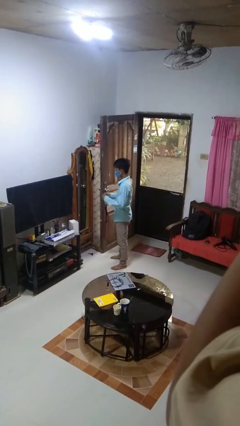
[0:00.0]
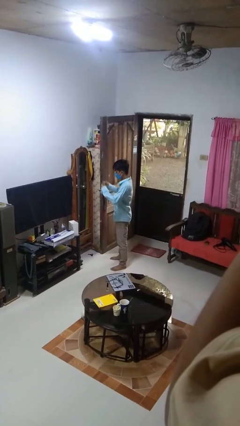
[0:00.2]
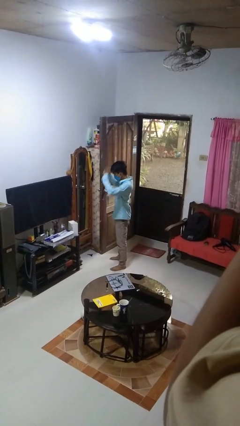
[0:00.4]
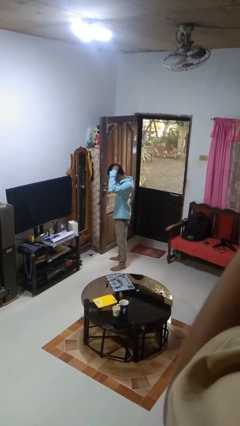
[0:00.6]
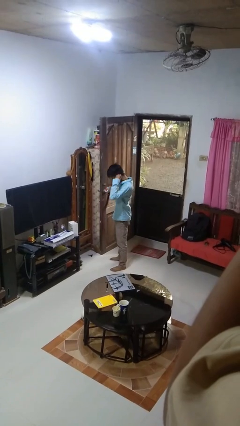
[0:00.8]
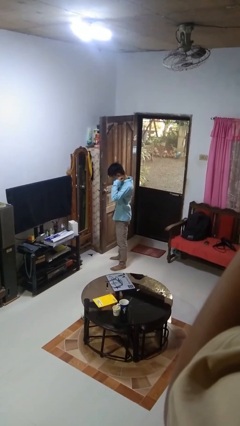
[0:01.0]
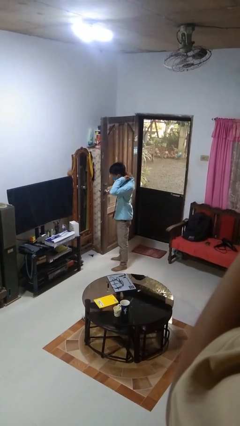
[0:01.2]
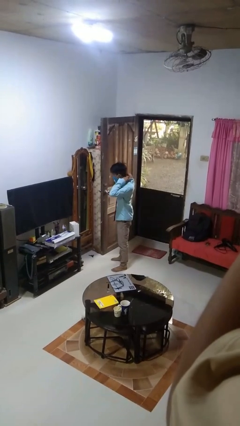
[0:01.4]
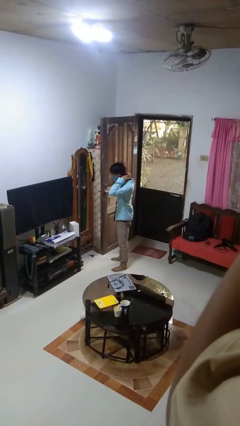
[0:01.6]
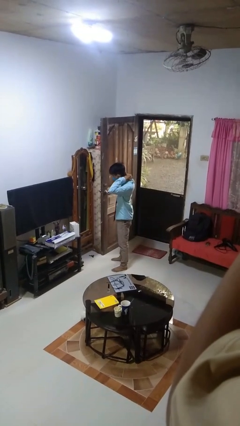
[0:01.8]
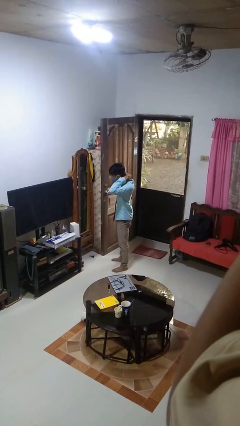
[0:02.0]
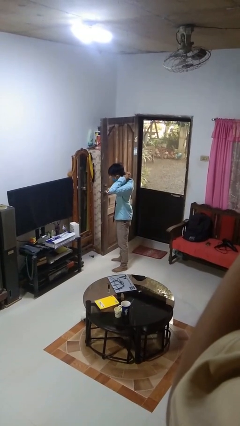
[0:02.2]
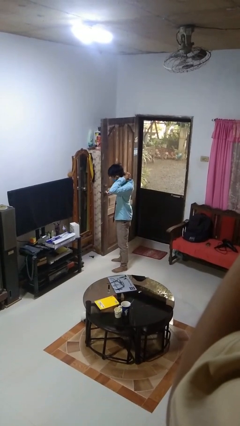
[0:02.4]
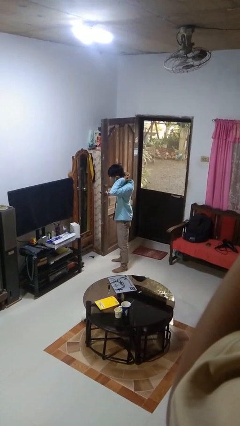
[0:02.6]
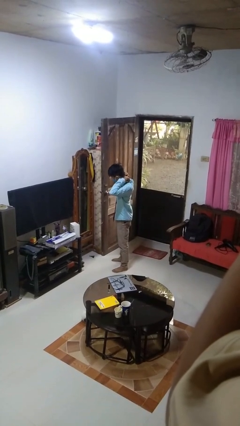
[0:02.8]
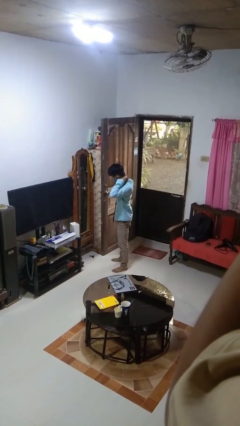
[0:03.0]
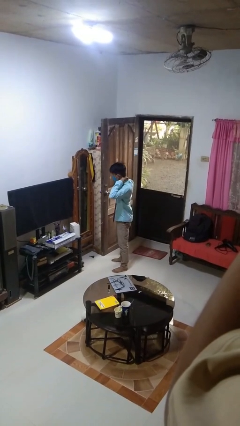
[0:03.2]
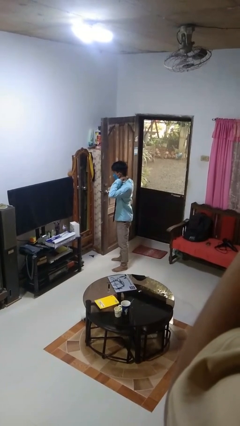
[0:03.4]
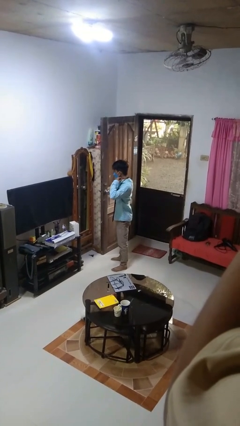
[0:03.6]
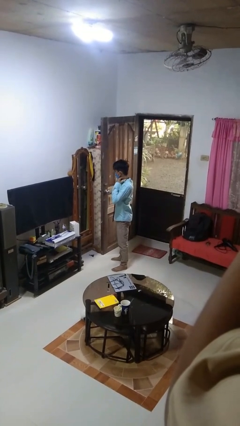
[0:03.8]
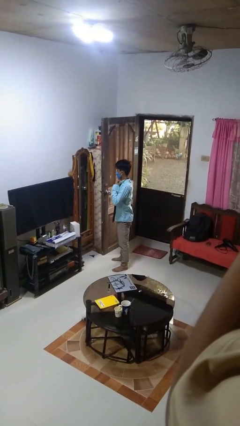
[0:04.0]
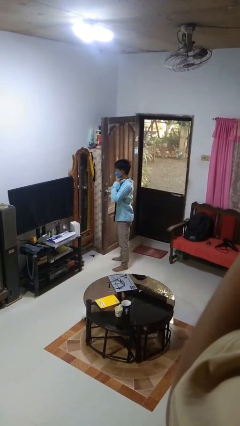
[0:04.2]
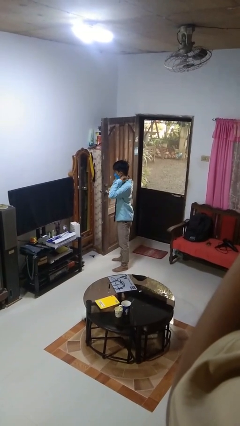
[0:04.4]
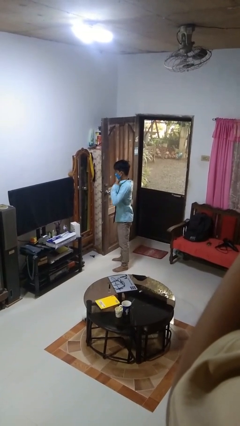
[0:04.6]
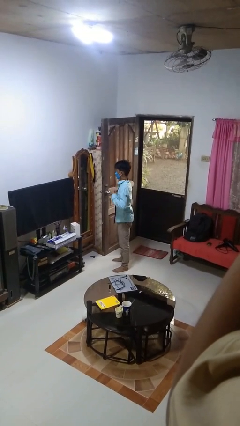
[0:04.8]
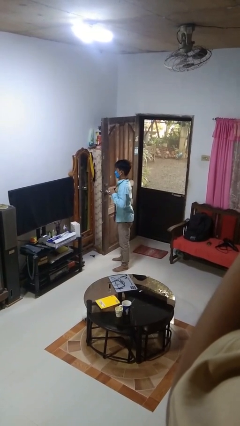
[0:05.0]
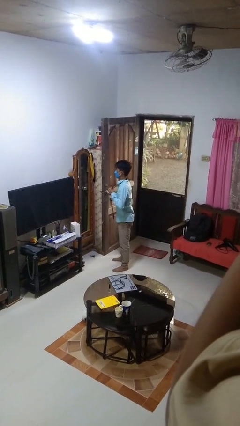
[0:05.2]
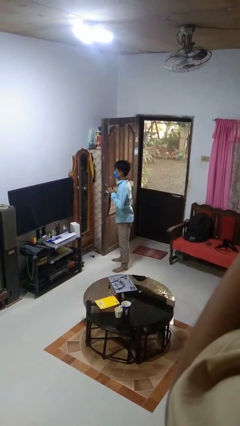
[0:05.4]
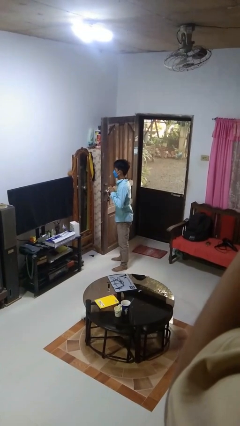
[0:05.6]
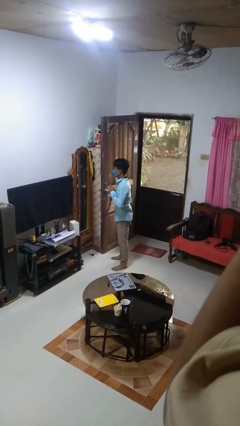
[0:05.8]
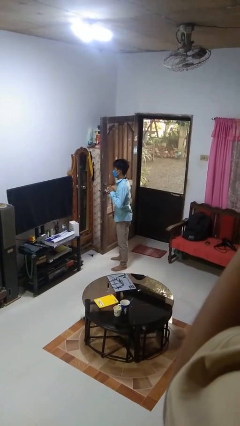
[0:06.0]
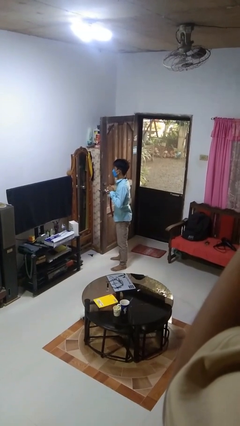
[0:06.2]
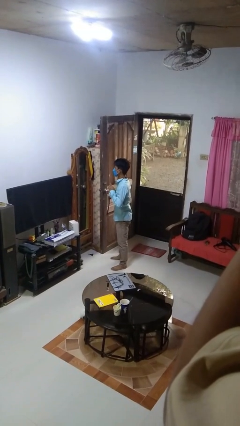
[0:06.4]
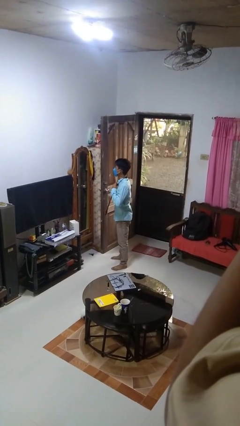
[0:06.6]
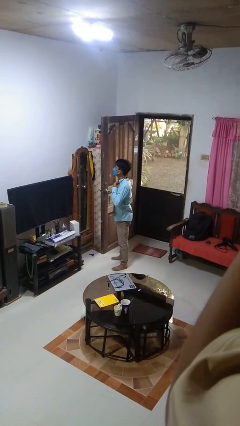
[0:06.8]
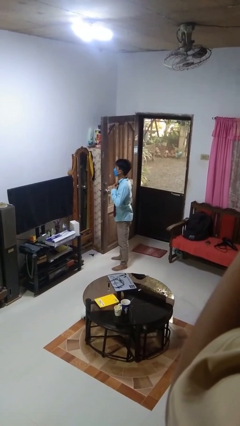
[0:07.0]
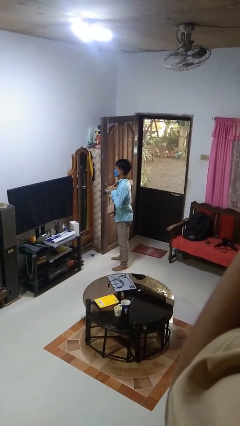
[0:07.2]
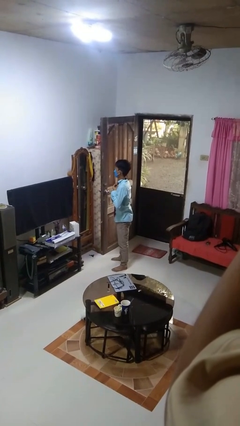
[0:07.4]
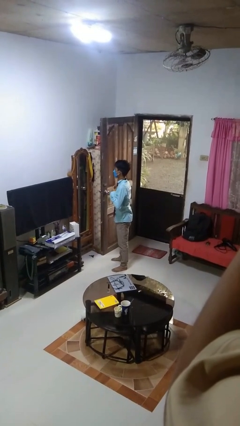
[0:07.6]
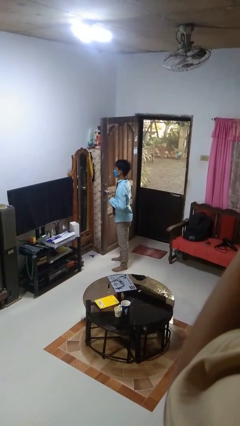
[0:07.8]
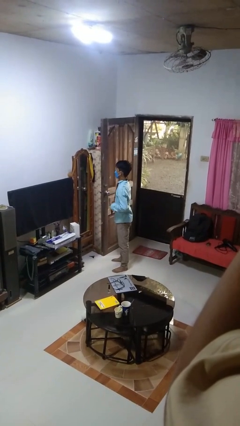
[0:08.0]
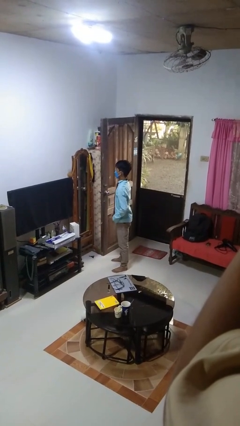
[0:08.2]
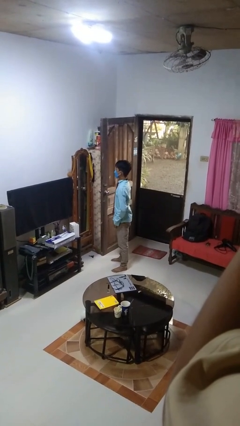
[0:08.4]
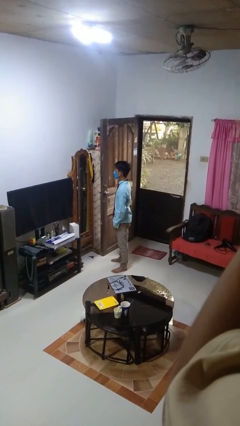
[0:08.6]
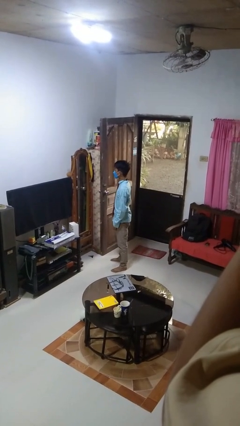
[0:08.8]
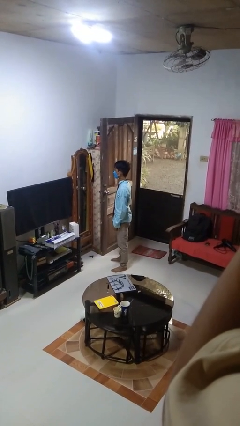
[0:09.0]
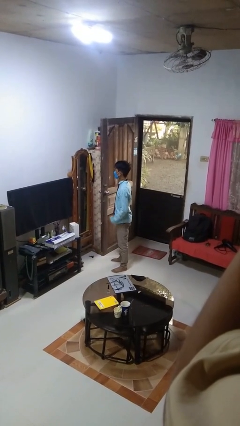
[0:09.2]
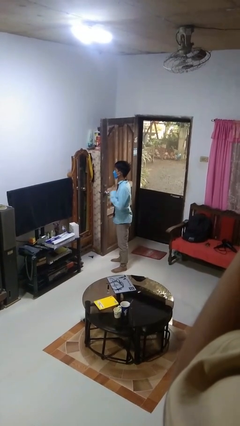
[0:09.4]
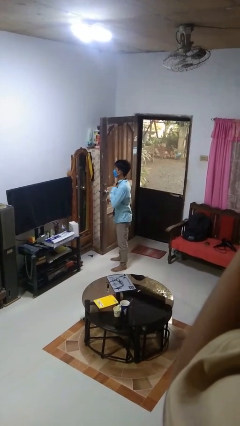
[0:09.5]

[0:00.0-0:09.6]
person puts on necktie

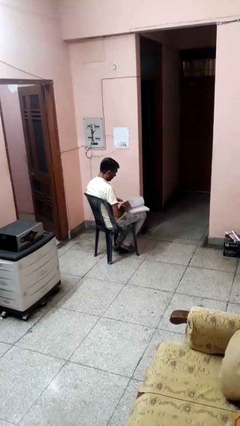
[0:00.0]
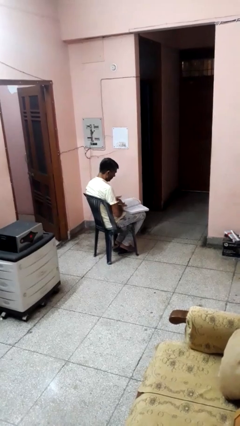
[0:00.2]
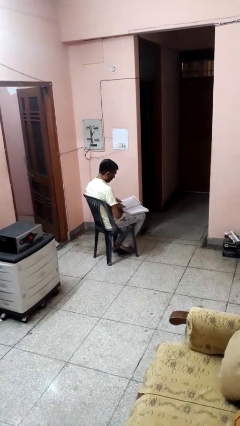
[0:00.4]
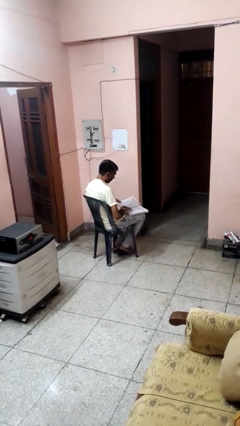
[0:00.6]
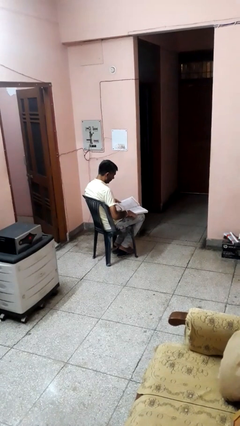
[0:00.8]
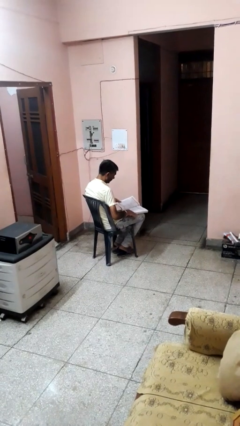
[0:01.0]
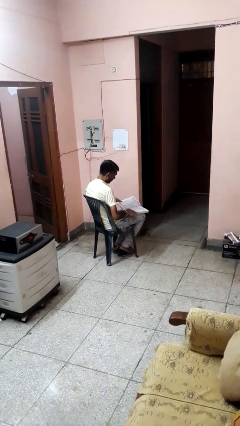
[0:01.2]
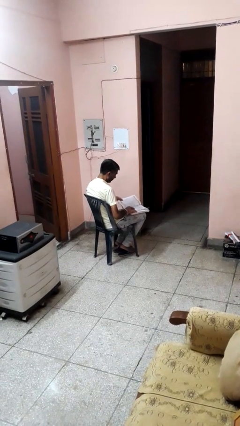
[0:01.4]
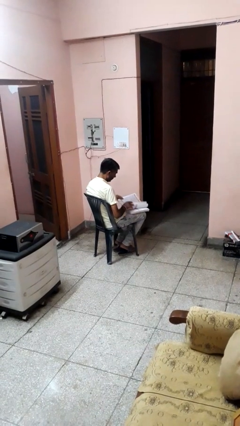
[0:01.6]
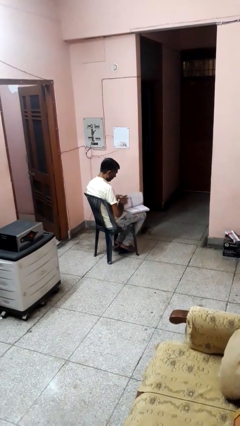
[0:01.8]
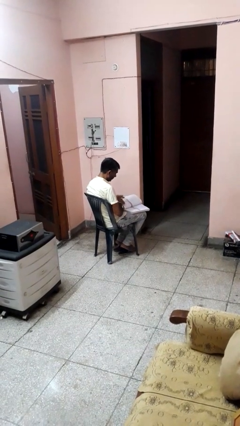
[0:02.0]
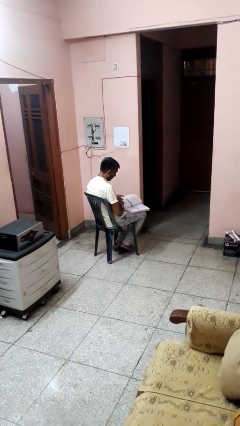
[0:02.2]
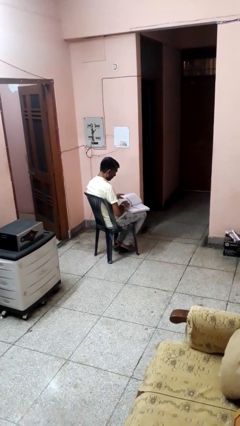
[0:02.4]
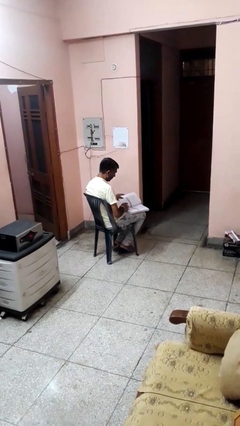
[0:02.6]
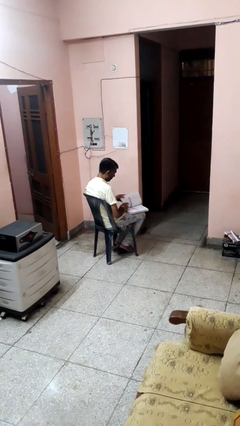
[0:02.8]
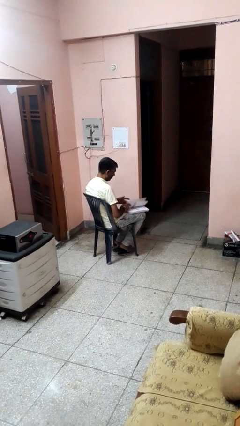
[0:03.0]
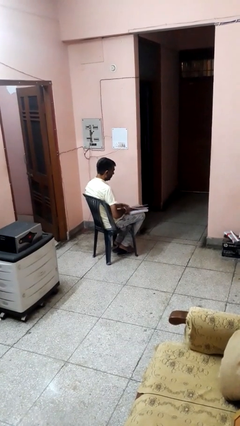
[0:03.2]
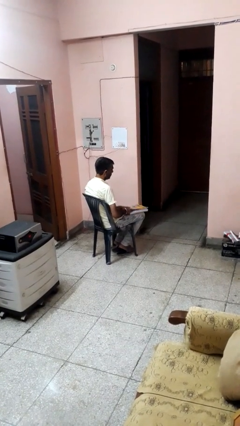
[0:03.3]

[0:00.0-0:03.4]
person reads book

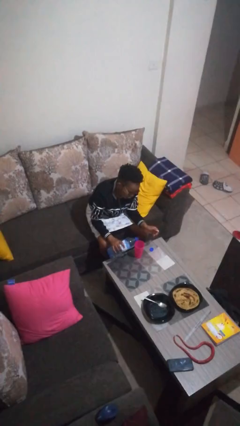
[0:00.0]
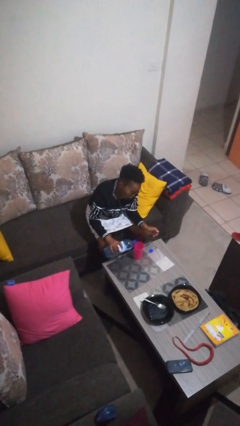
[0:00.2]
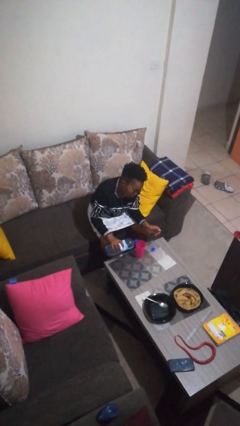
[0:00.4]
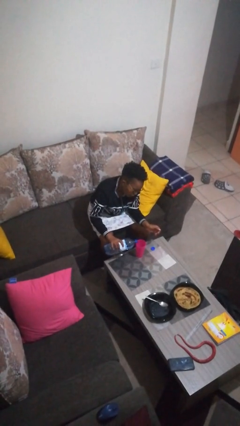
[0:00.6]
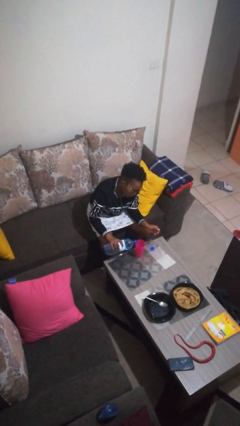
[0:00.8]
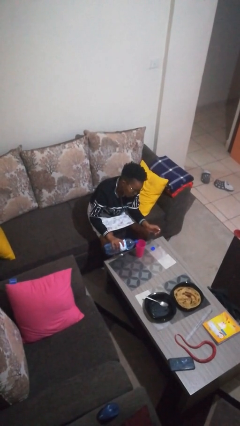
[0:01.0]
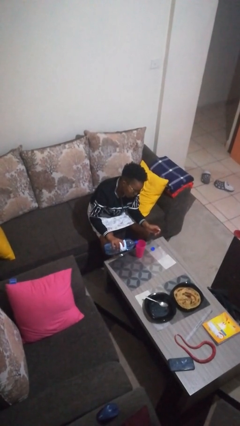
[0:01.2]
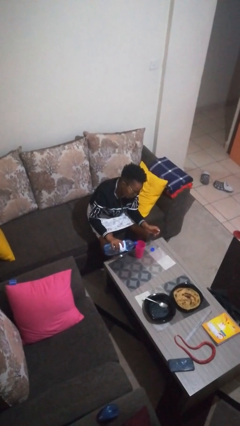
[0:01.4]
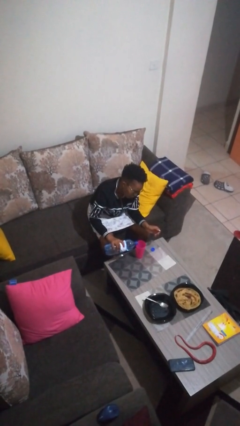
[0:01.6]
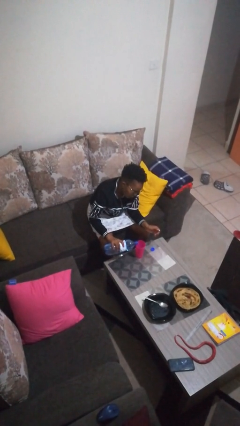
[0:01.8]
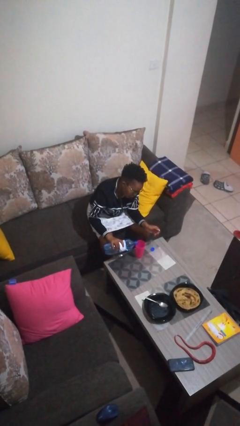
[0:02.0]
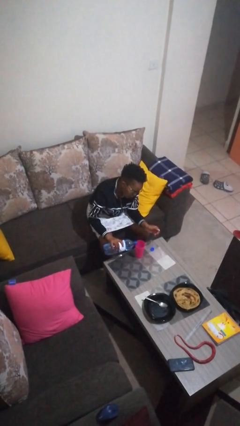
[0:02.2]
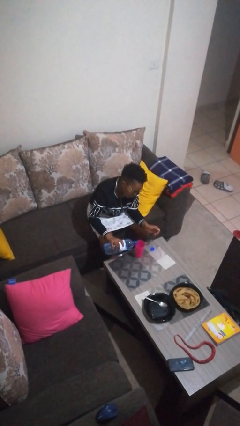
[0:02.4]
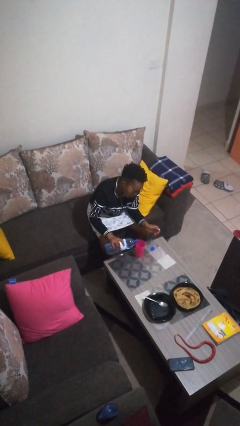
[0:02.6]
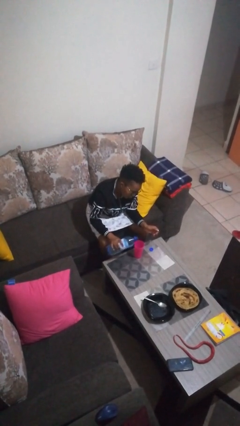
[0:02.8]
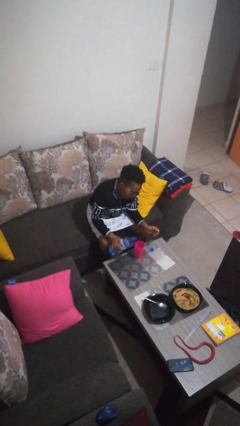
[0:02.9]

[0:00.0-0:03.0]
person pours liquid into cup

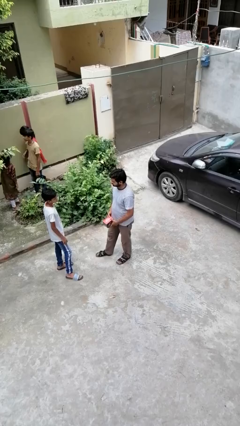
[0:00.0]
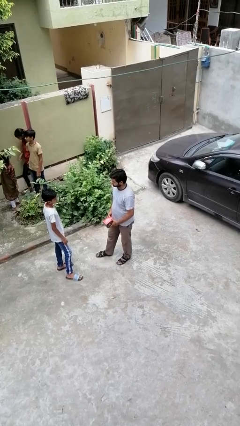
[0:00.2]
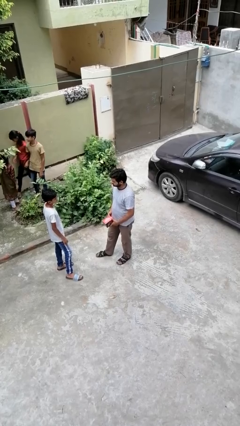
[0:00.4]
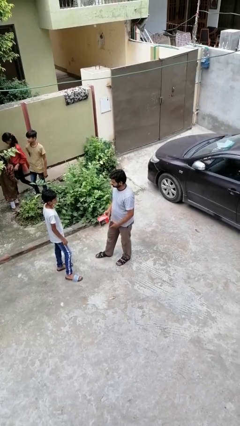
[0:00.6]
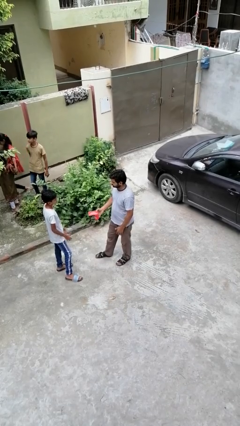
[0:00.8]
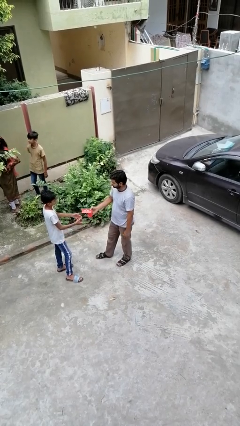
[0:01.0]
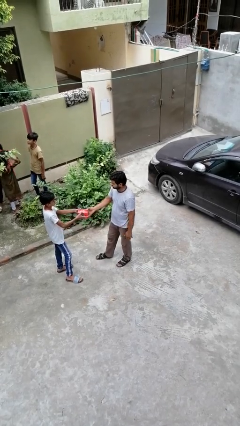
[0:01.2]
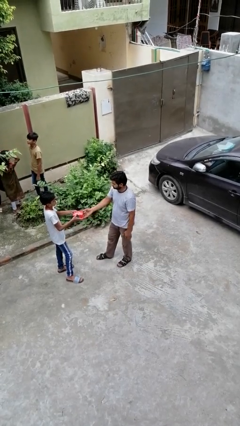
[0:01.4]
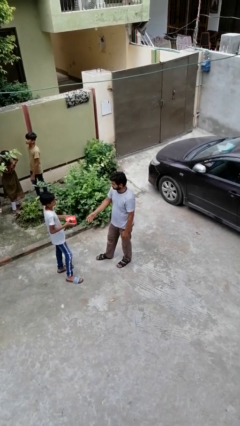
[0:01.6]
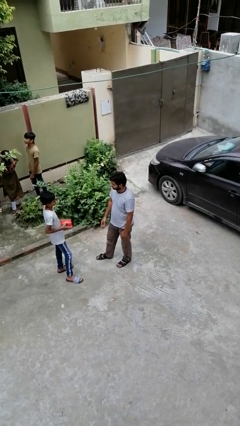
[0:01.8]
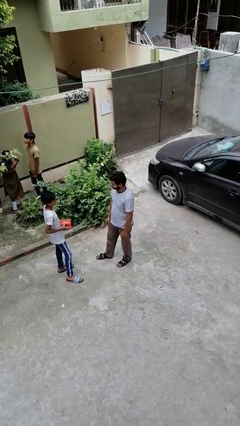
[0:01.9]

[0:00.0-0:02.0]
person transfers object to person

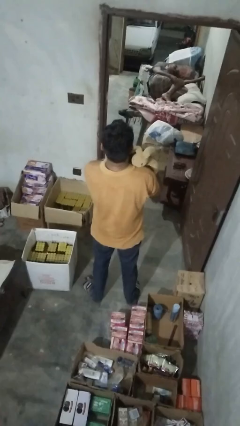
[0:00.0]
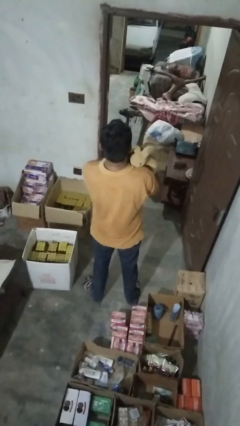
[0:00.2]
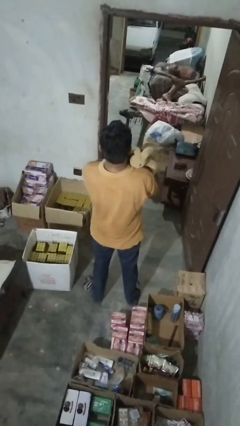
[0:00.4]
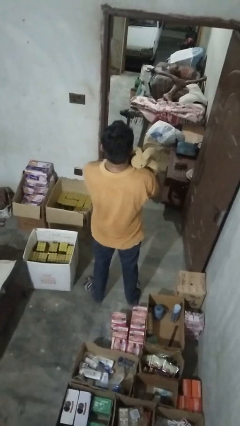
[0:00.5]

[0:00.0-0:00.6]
person hugs stuffed animal
